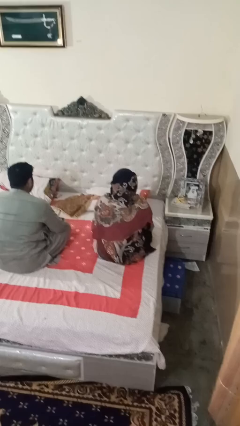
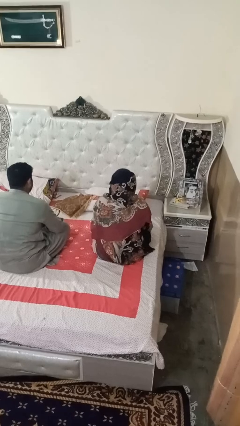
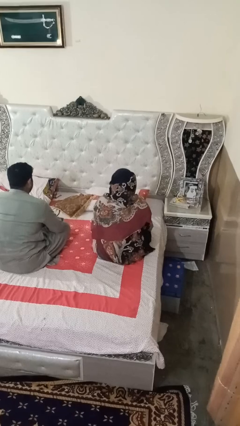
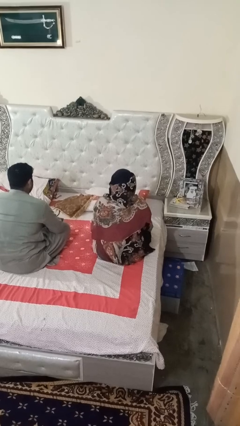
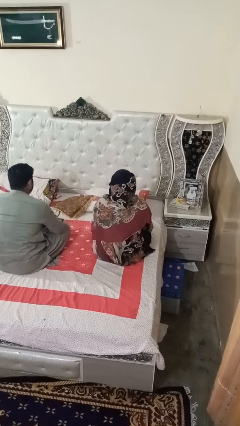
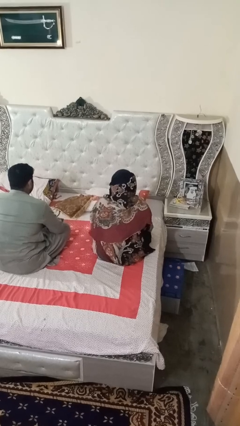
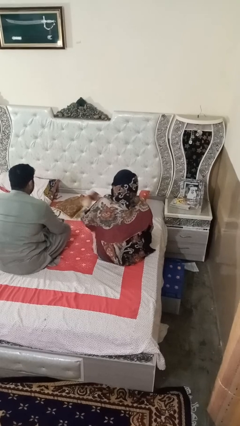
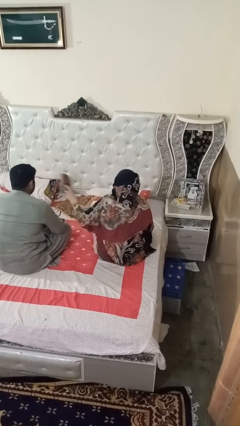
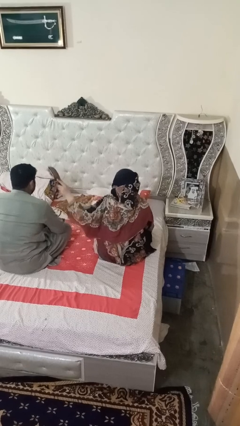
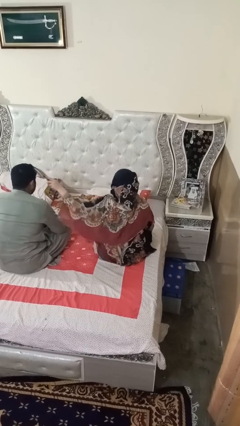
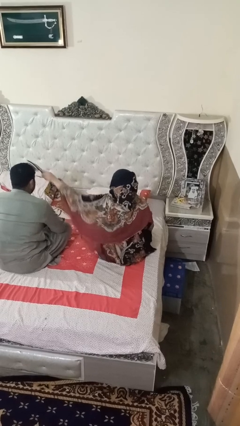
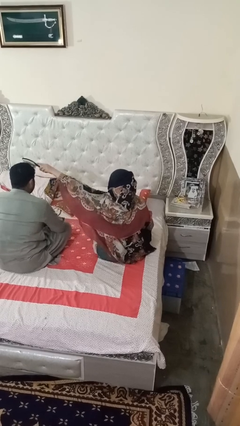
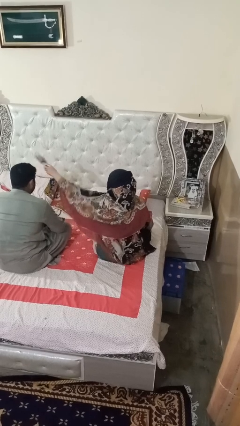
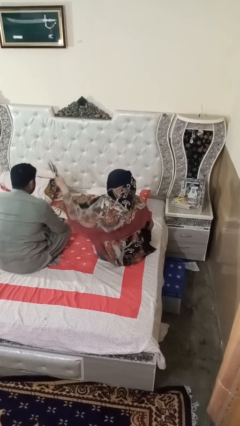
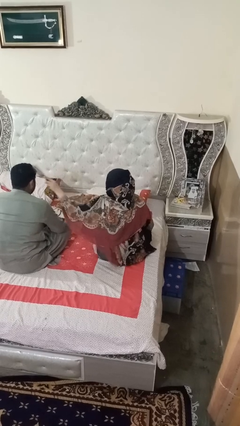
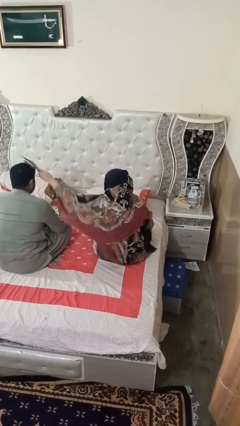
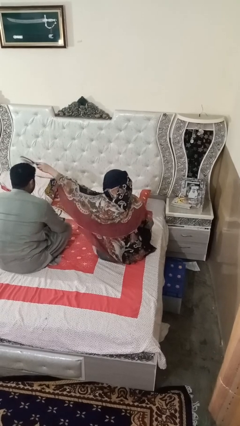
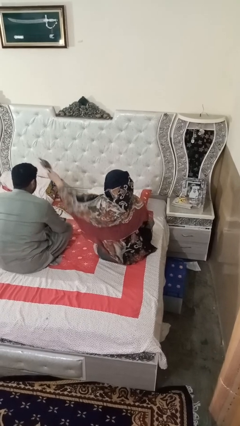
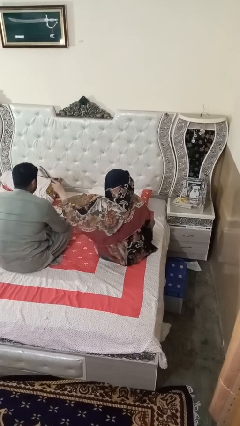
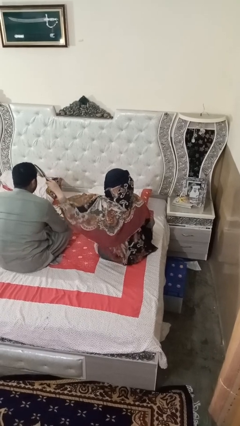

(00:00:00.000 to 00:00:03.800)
person brushes hair of person

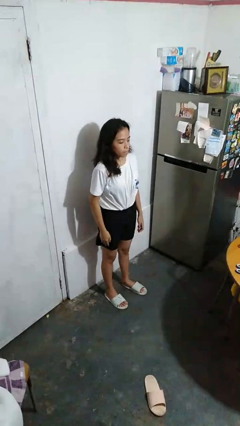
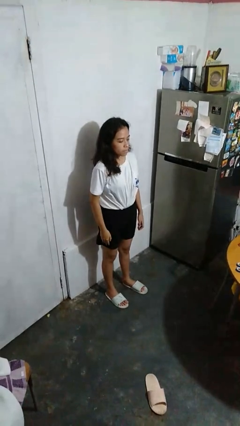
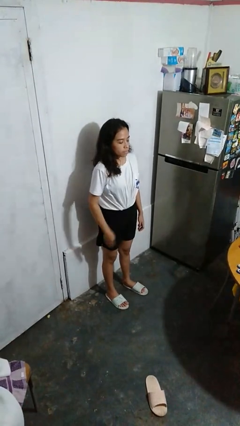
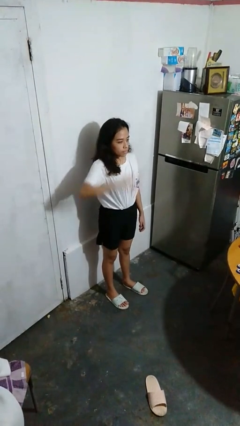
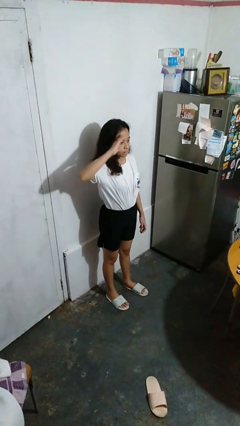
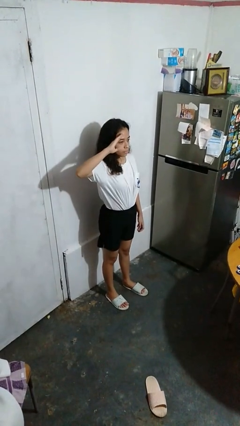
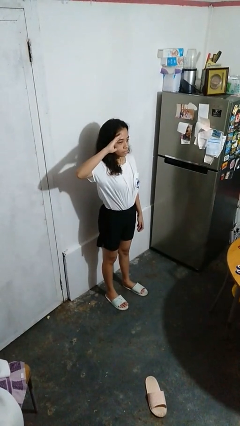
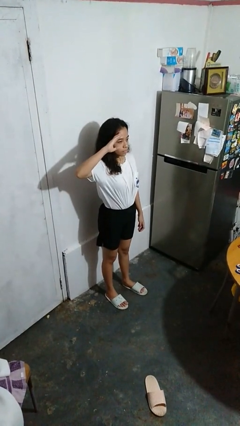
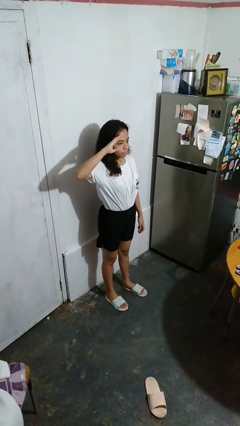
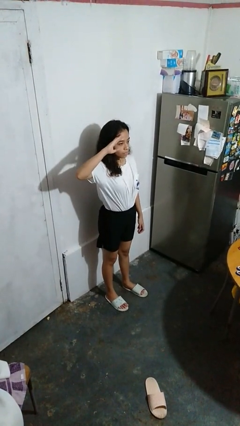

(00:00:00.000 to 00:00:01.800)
person salutes

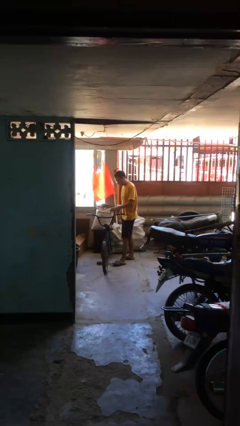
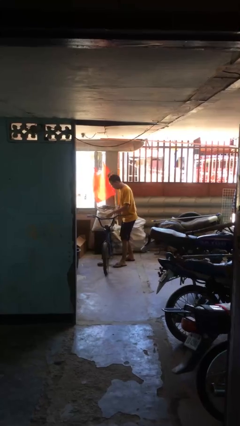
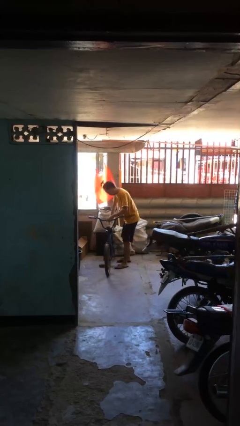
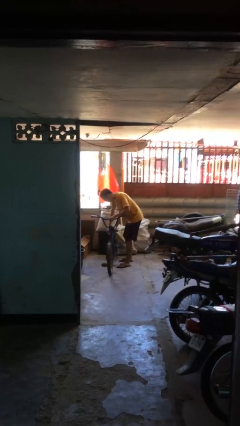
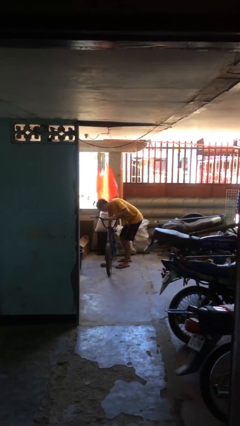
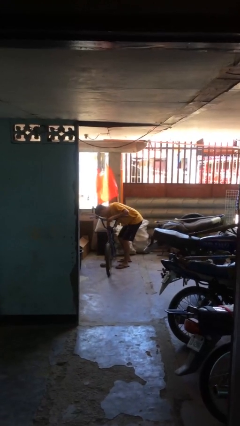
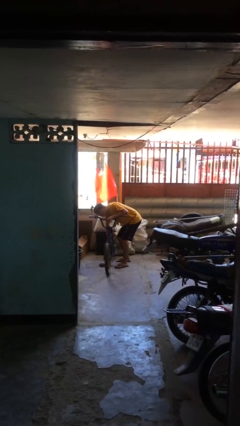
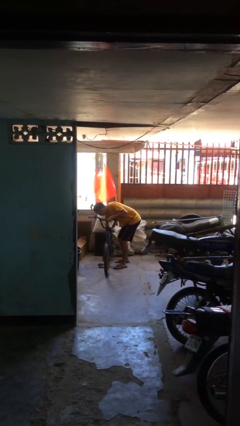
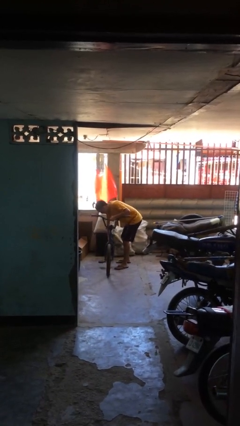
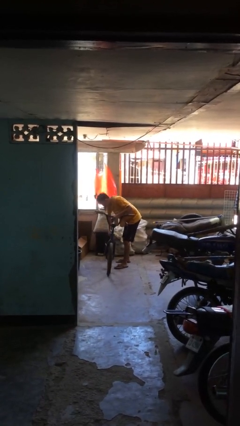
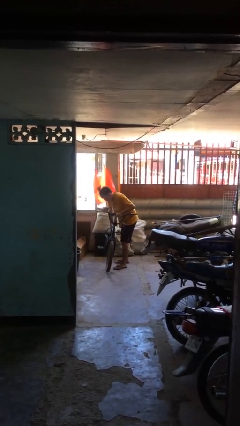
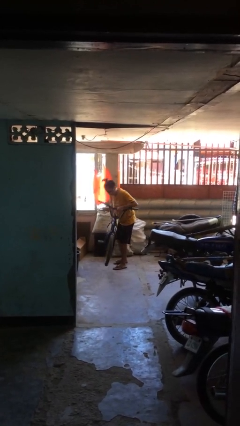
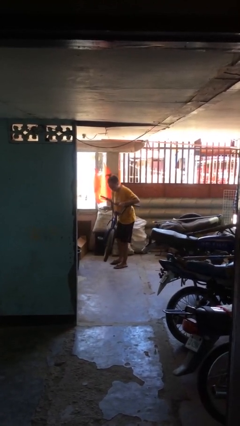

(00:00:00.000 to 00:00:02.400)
person picks up object from floor

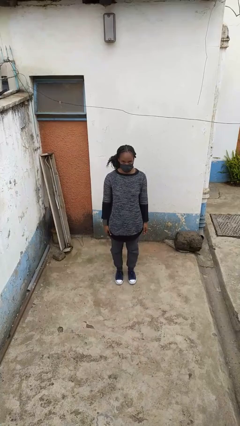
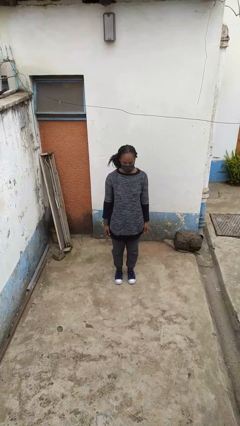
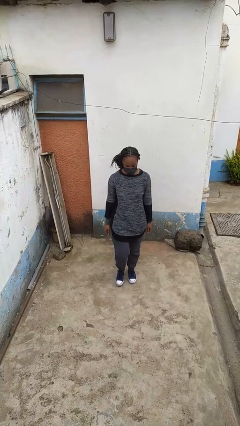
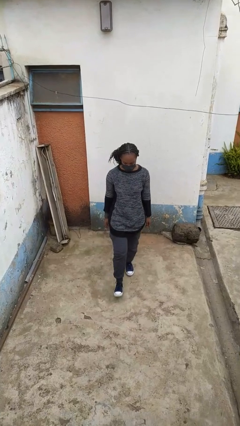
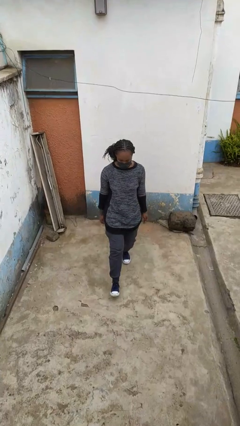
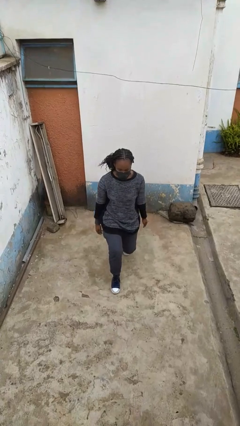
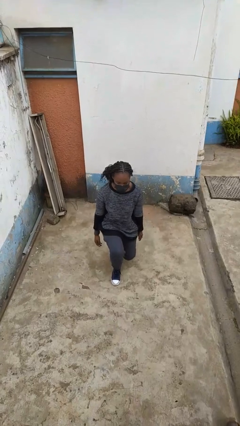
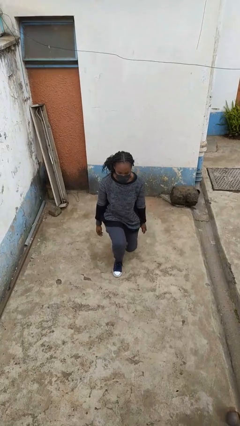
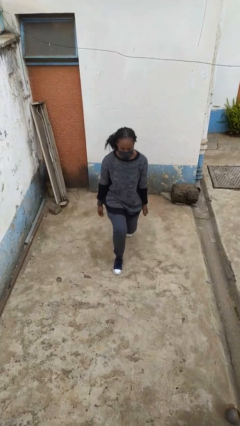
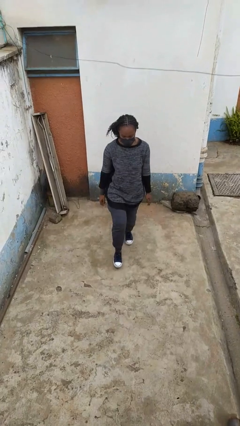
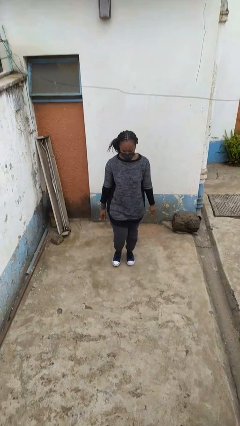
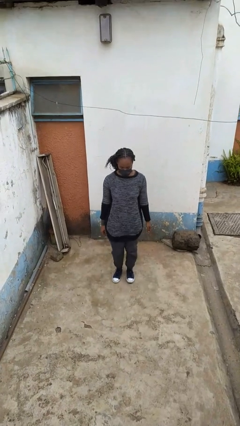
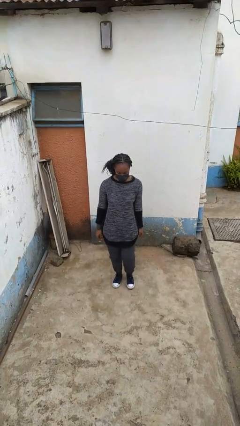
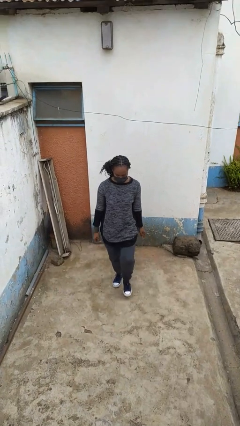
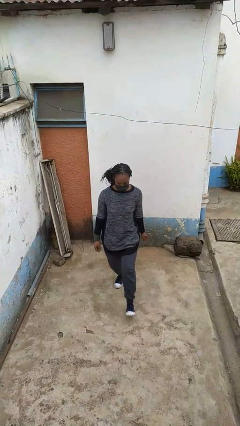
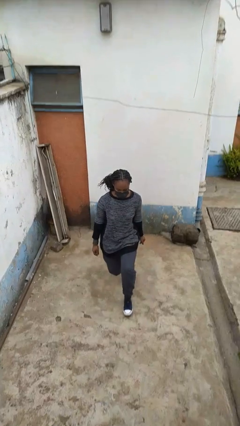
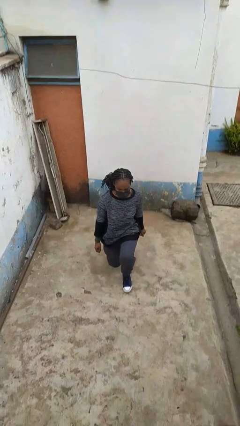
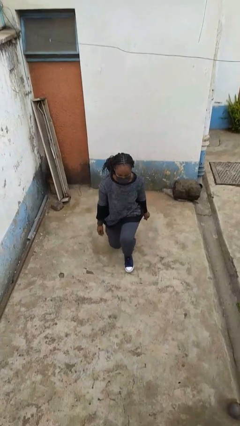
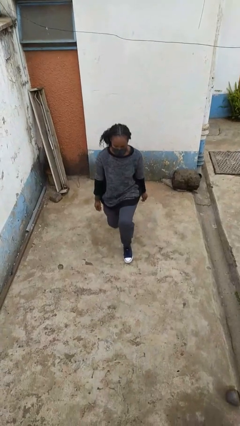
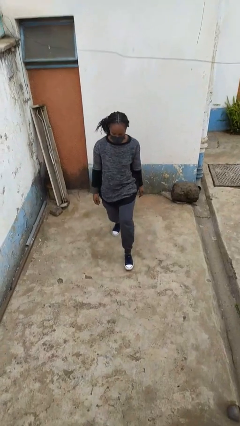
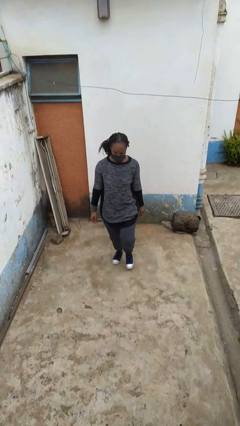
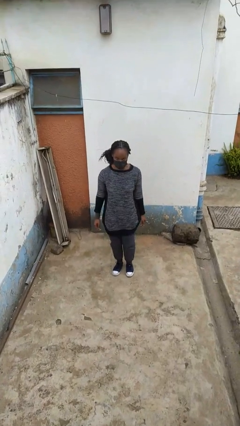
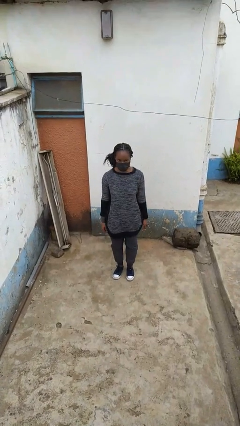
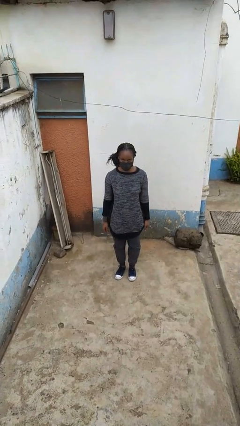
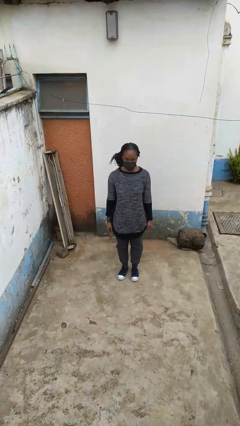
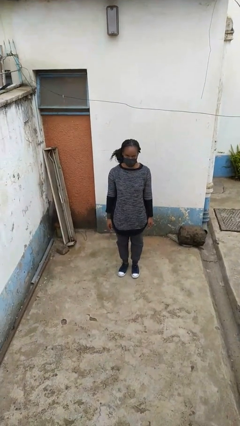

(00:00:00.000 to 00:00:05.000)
person exercises with lunges

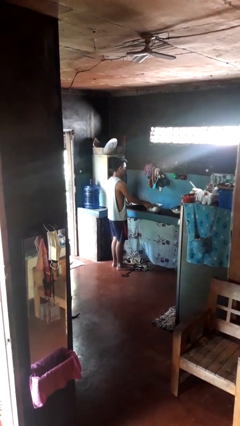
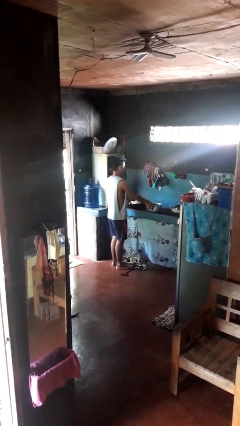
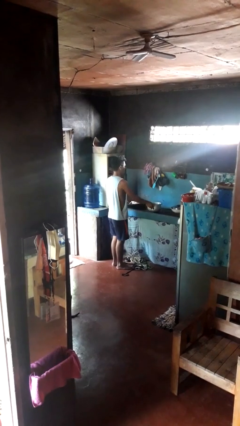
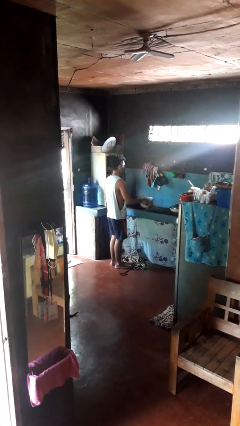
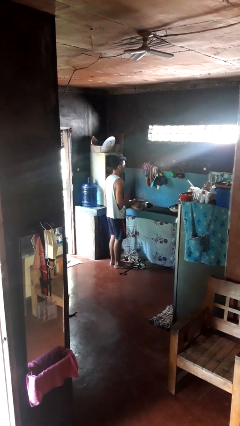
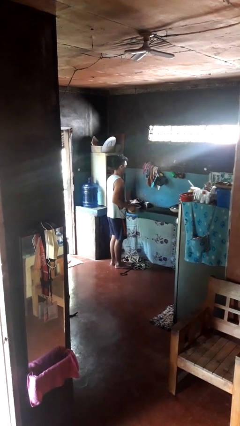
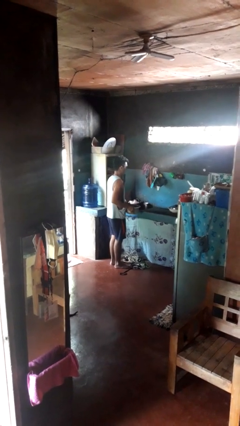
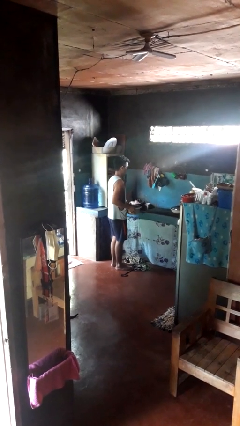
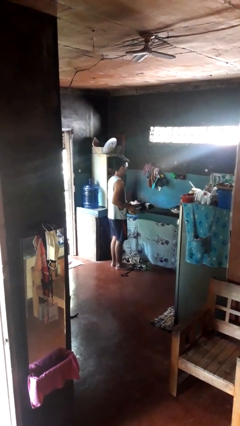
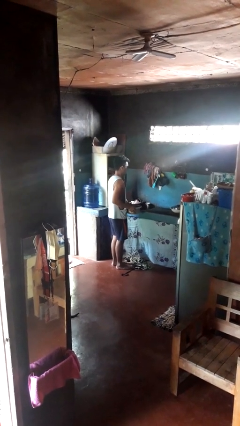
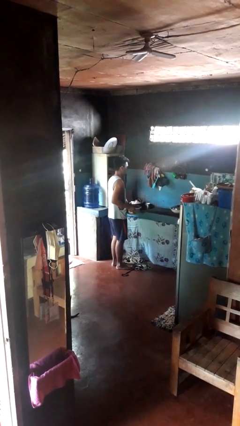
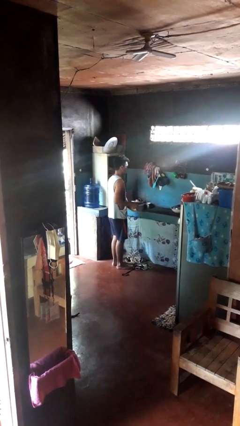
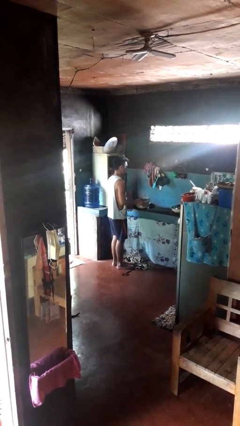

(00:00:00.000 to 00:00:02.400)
person picks up object from countertop

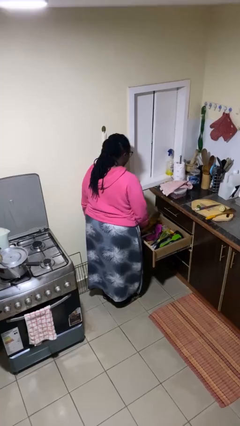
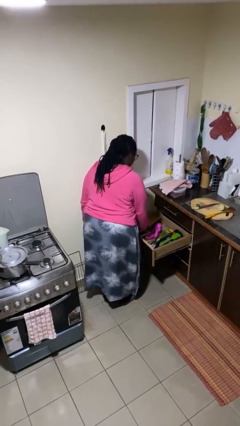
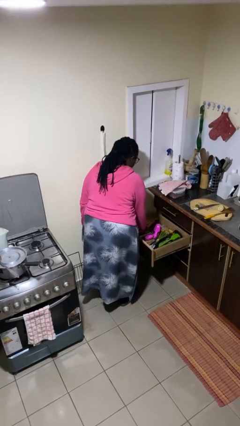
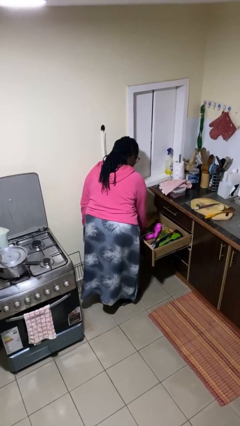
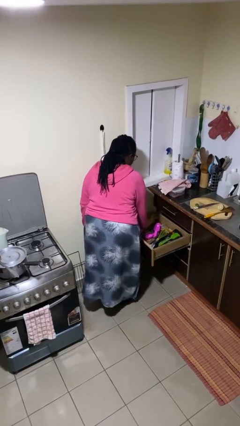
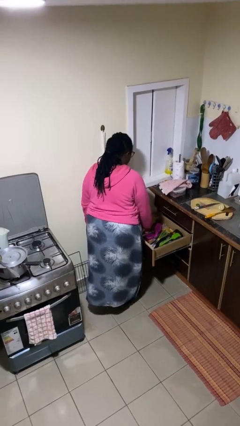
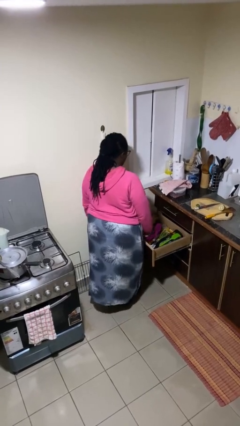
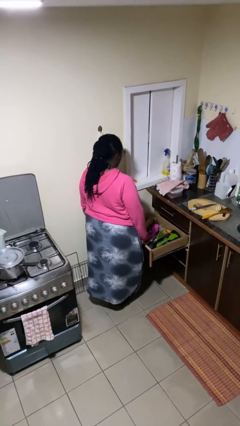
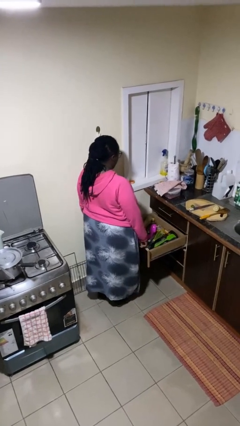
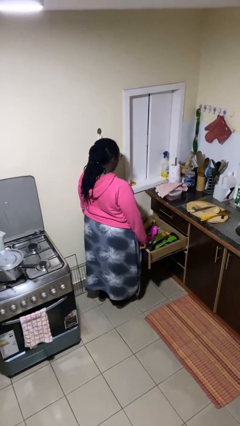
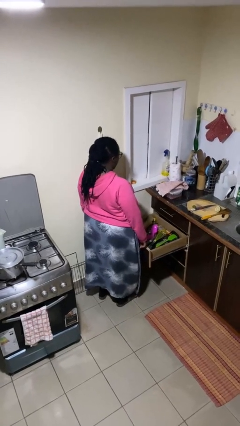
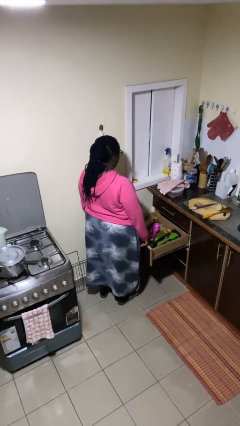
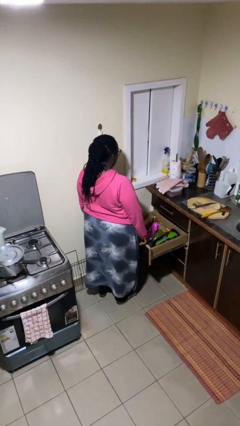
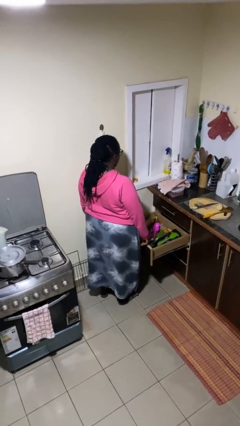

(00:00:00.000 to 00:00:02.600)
person puts object into kitchen drawer
